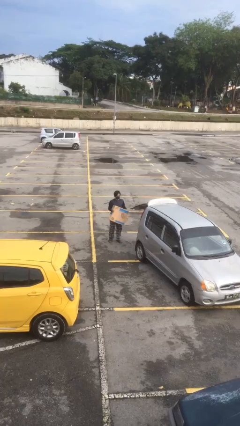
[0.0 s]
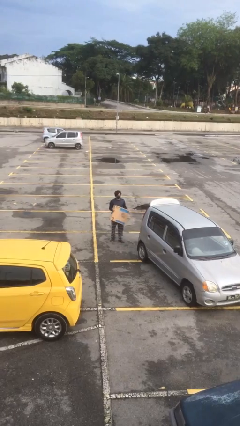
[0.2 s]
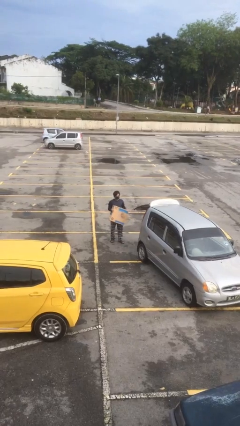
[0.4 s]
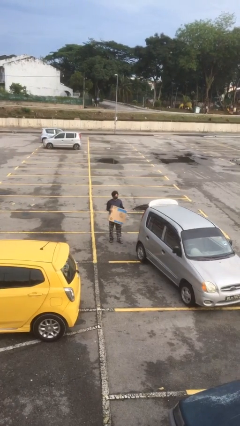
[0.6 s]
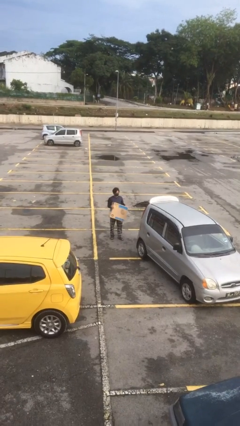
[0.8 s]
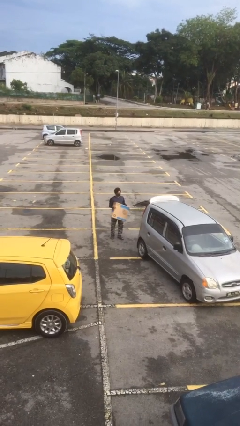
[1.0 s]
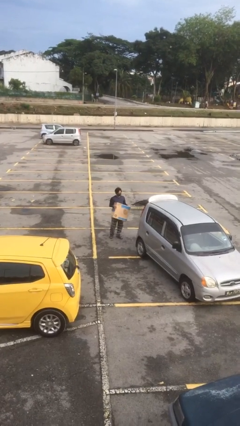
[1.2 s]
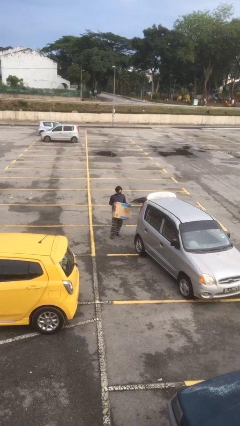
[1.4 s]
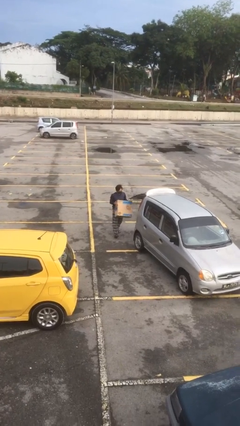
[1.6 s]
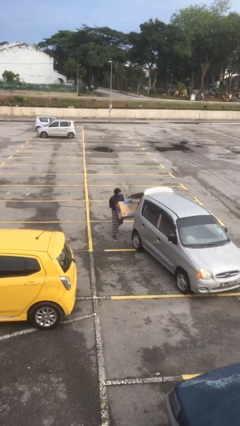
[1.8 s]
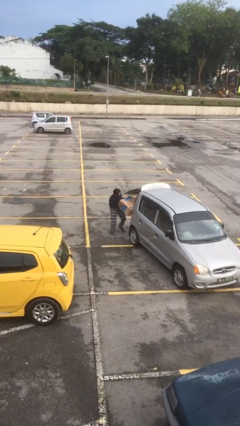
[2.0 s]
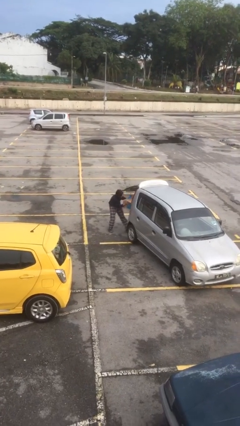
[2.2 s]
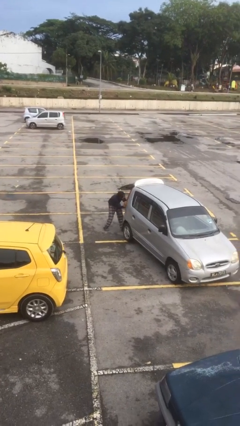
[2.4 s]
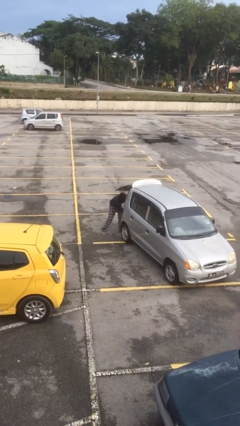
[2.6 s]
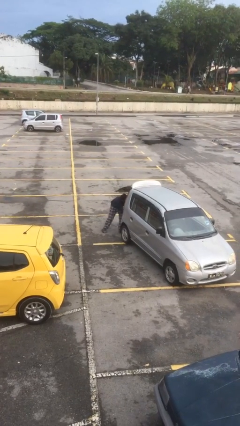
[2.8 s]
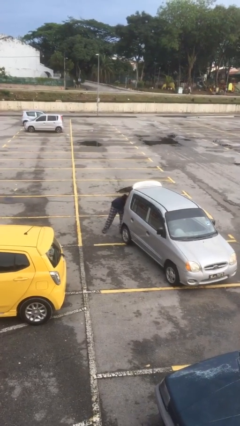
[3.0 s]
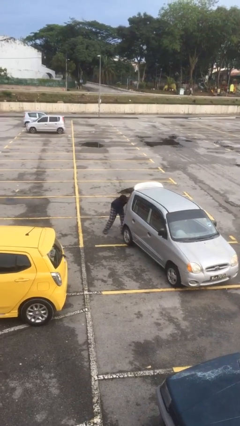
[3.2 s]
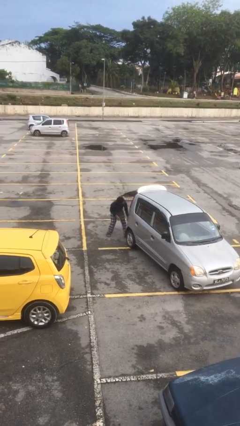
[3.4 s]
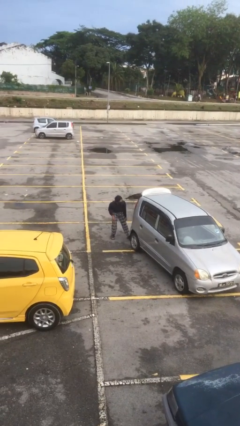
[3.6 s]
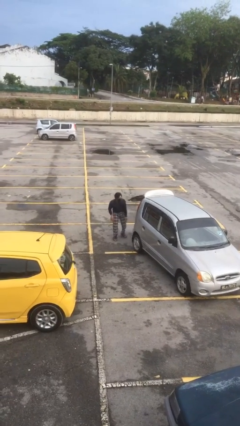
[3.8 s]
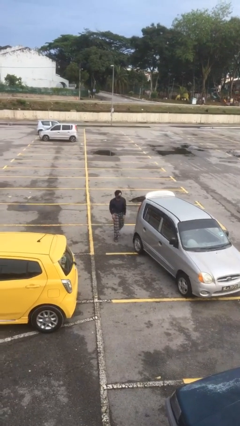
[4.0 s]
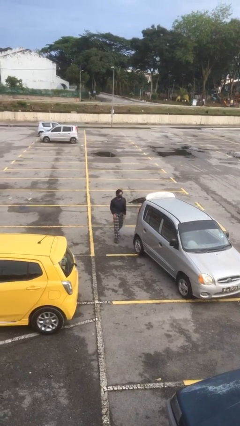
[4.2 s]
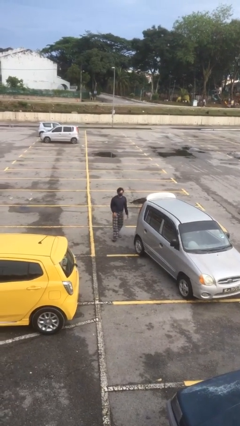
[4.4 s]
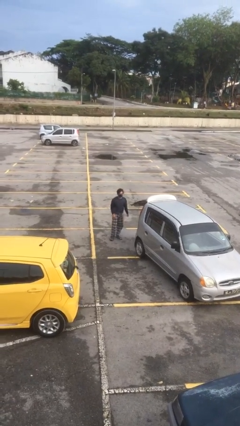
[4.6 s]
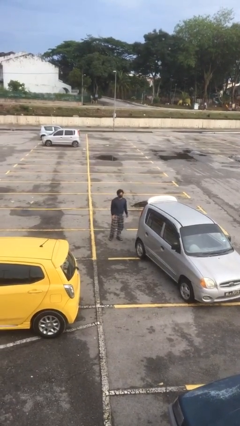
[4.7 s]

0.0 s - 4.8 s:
person loads car

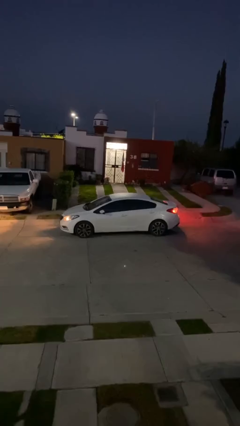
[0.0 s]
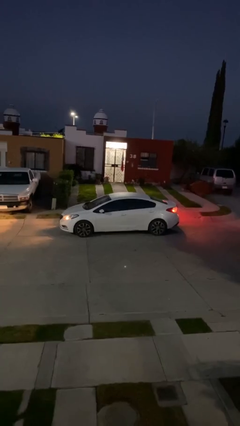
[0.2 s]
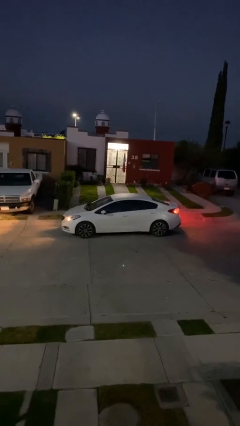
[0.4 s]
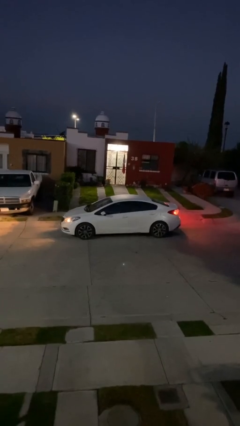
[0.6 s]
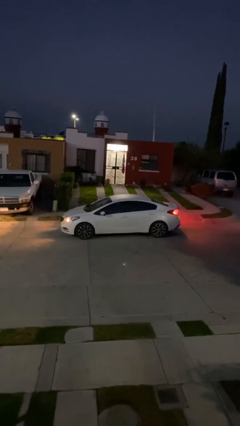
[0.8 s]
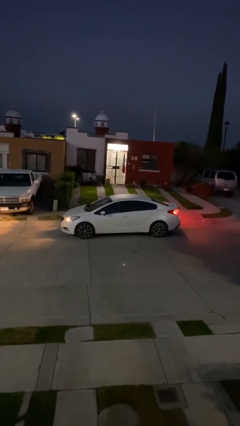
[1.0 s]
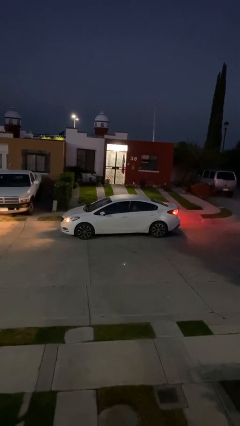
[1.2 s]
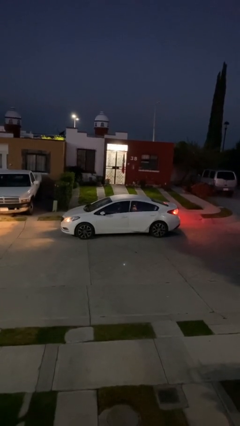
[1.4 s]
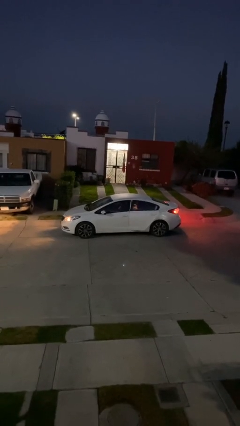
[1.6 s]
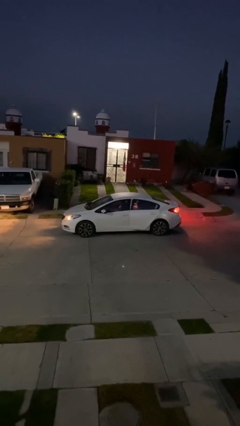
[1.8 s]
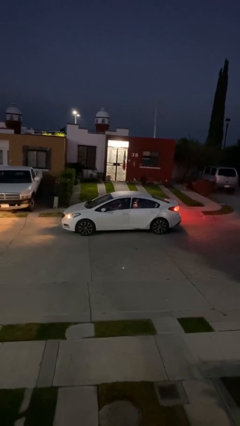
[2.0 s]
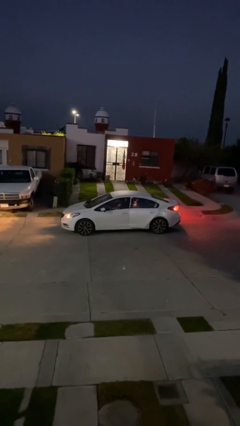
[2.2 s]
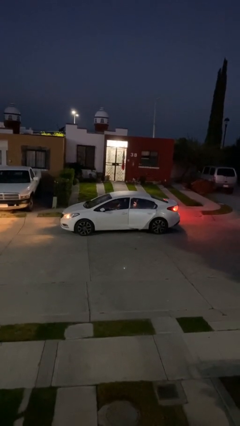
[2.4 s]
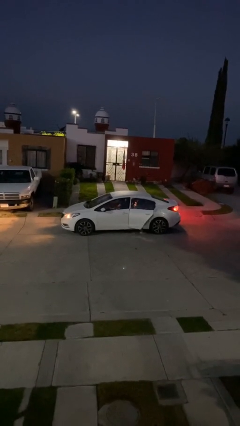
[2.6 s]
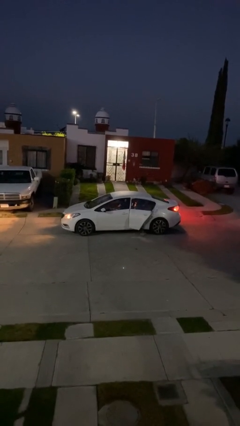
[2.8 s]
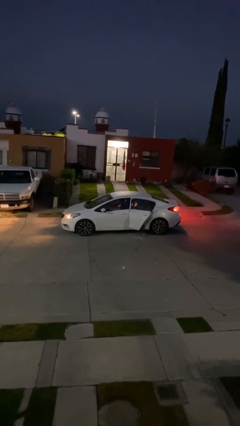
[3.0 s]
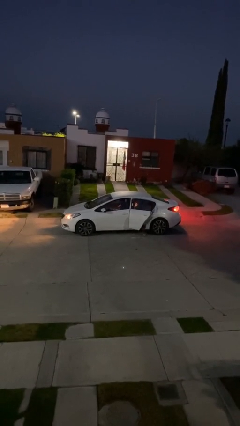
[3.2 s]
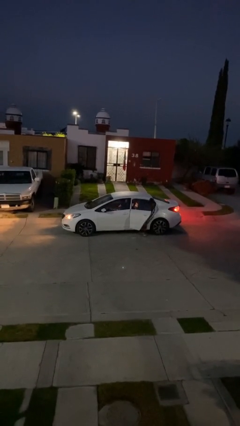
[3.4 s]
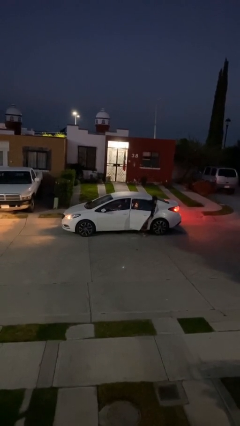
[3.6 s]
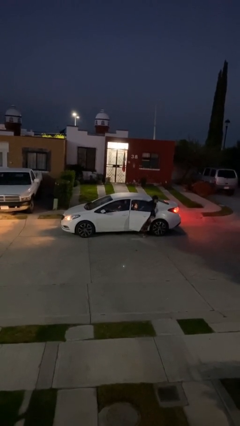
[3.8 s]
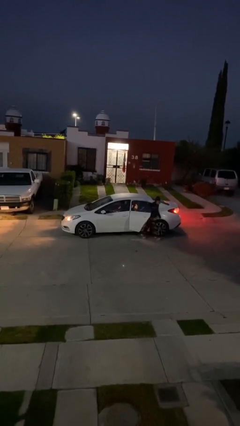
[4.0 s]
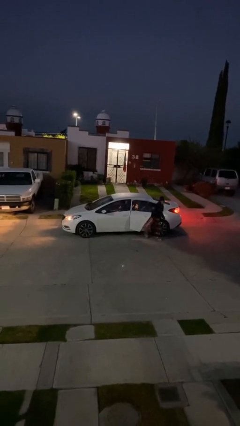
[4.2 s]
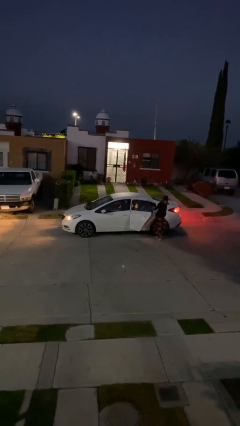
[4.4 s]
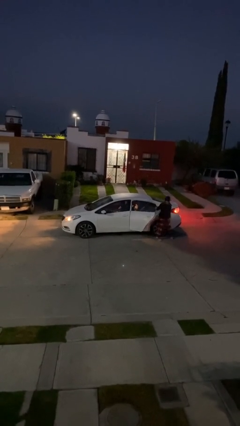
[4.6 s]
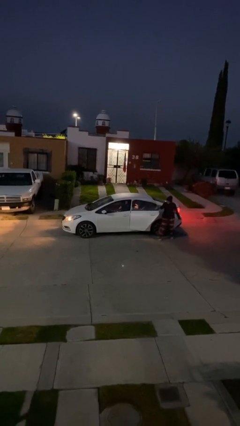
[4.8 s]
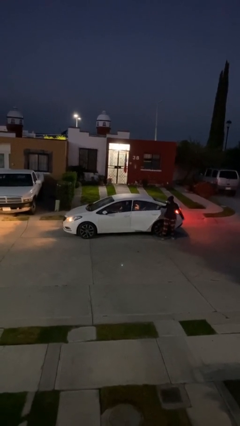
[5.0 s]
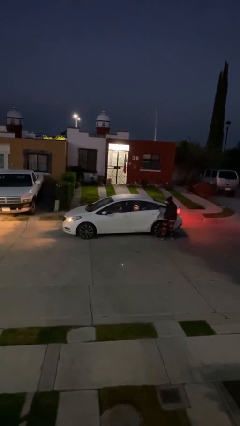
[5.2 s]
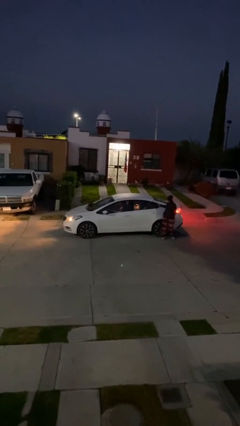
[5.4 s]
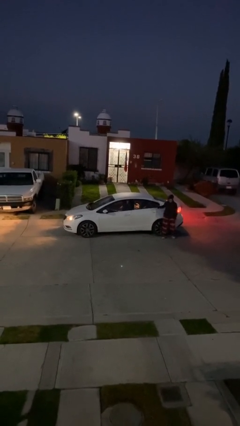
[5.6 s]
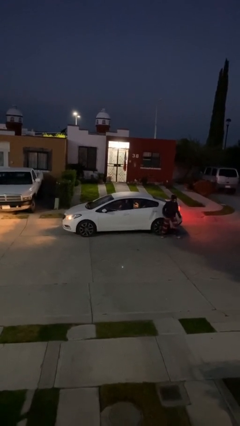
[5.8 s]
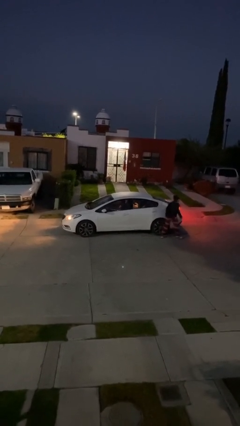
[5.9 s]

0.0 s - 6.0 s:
car drops off person

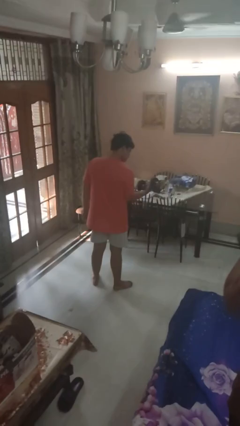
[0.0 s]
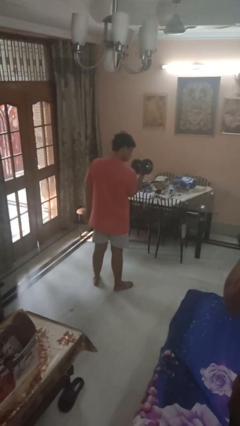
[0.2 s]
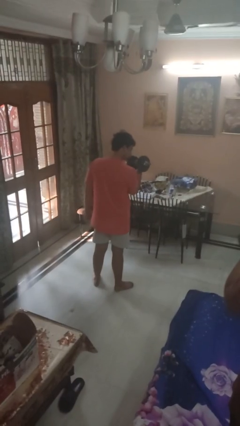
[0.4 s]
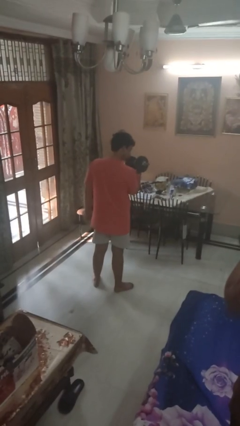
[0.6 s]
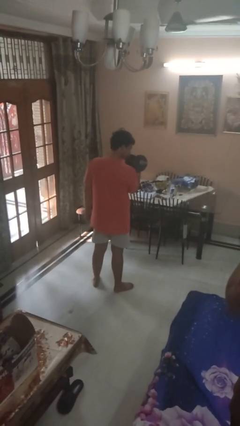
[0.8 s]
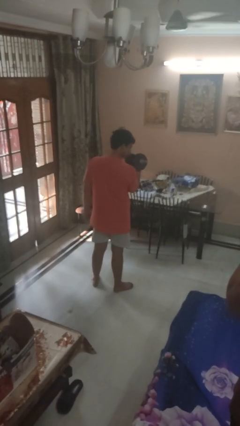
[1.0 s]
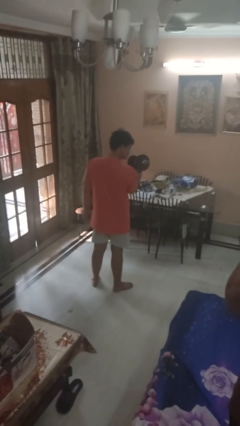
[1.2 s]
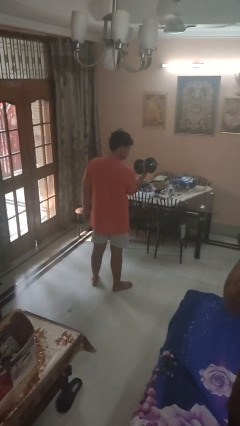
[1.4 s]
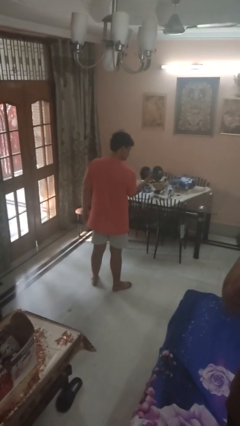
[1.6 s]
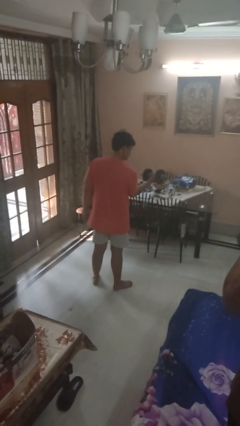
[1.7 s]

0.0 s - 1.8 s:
person lifts dumbbells

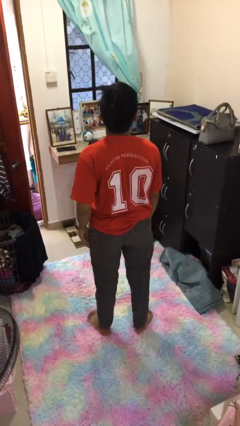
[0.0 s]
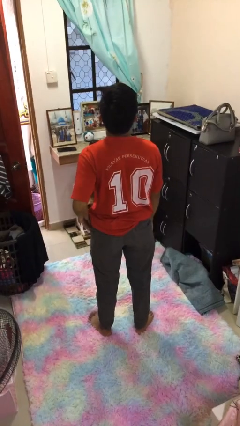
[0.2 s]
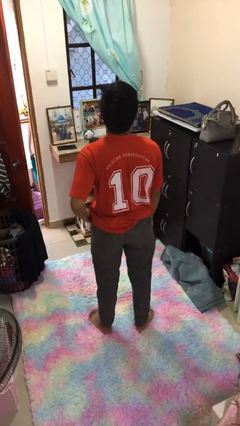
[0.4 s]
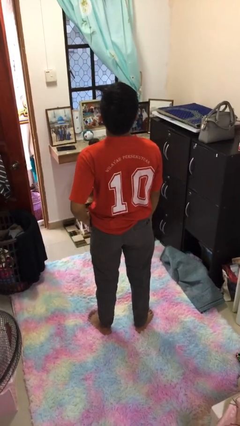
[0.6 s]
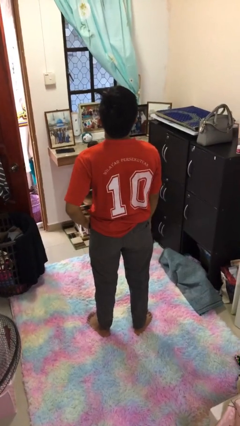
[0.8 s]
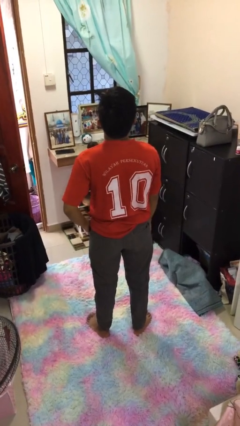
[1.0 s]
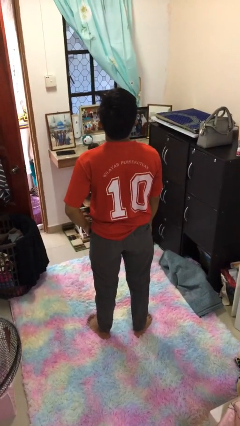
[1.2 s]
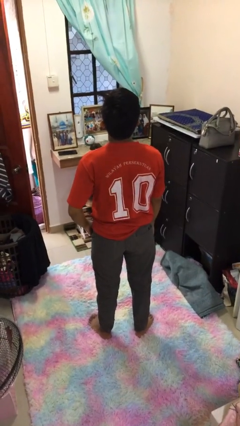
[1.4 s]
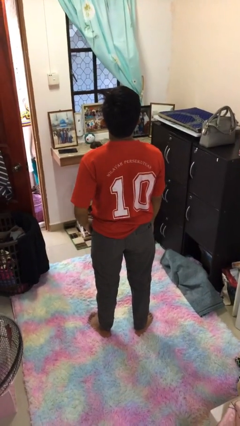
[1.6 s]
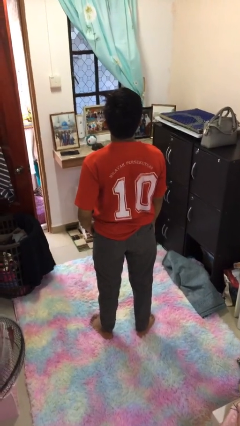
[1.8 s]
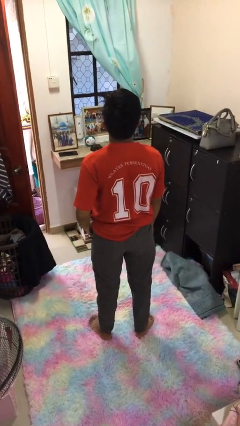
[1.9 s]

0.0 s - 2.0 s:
person puts hands in back pockets

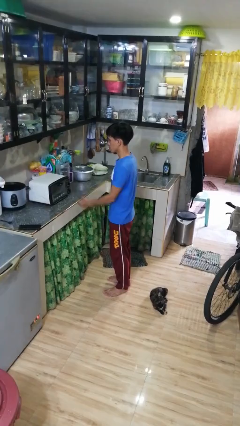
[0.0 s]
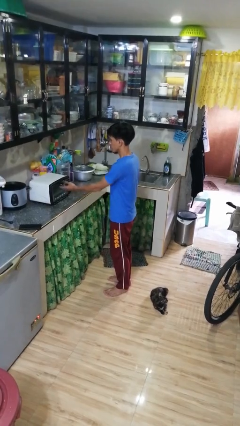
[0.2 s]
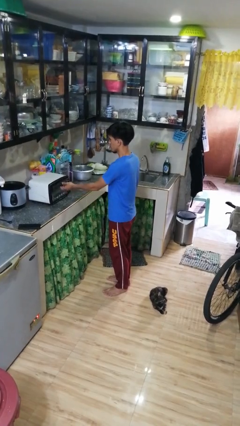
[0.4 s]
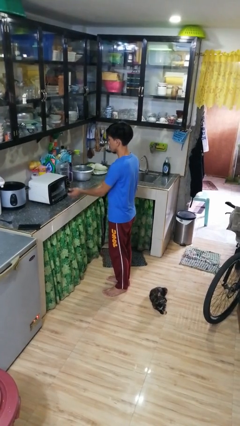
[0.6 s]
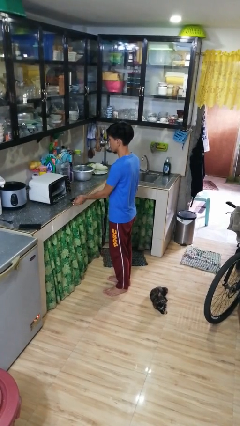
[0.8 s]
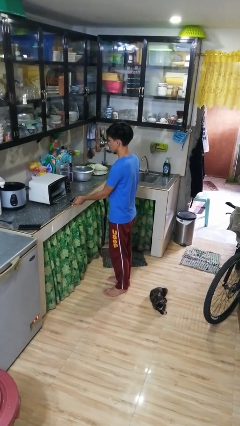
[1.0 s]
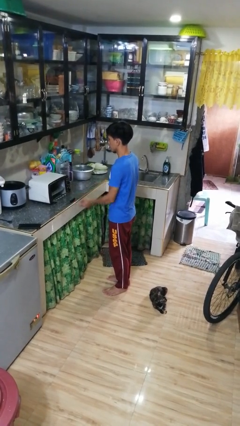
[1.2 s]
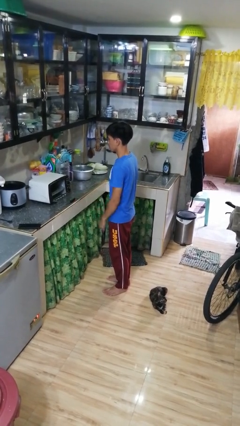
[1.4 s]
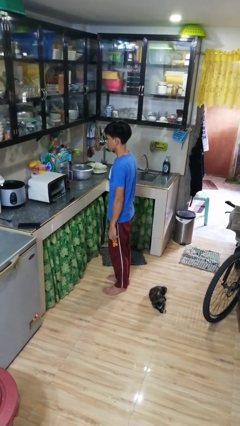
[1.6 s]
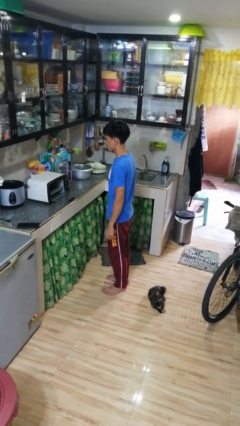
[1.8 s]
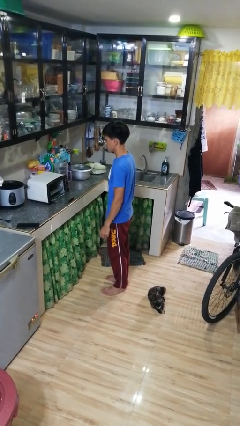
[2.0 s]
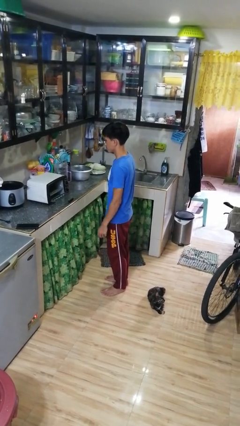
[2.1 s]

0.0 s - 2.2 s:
person opens microwave

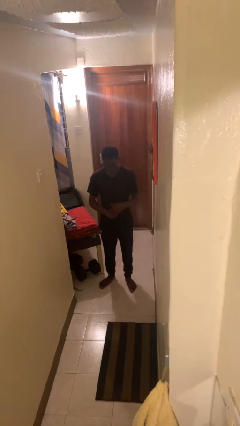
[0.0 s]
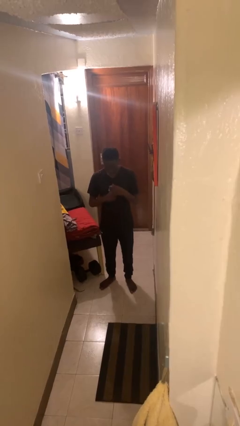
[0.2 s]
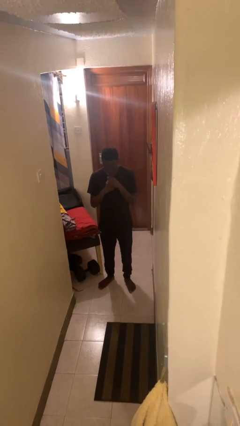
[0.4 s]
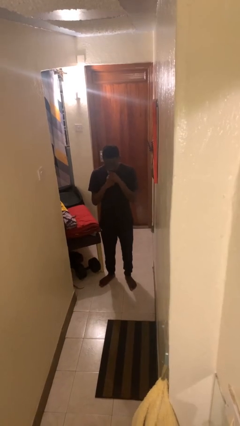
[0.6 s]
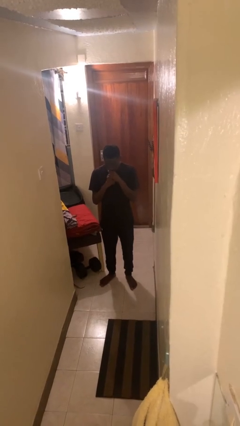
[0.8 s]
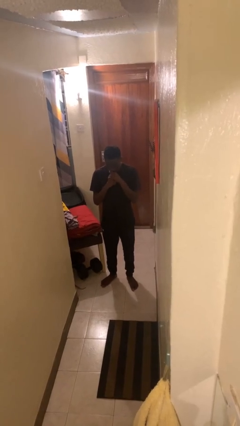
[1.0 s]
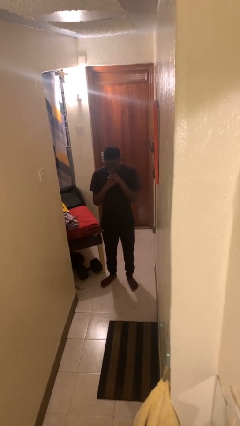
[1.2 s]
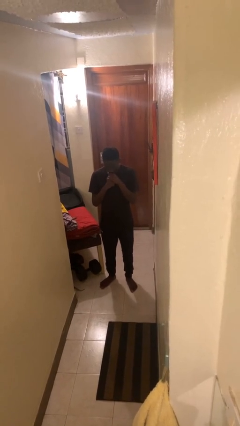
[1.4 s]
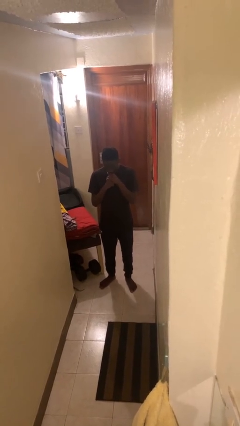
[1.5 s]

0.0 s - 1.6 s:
person vapes
